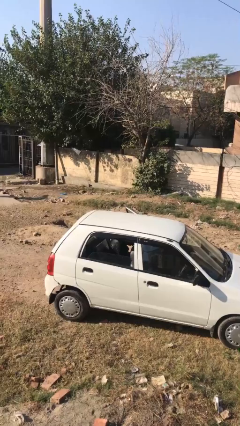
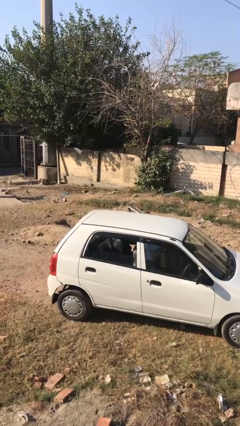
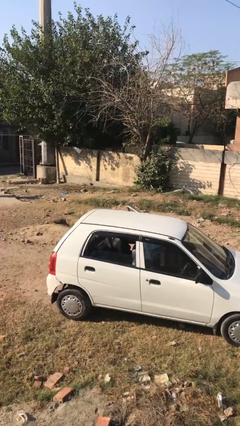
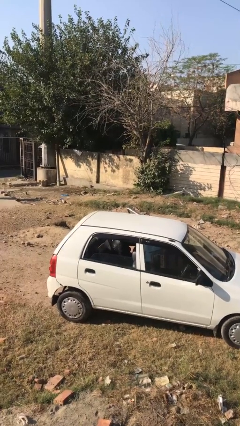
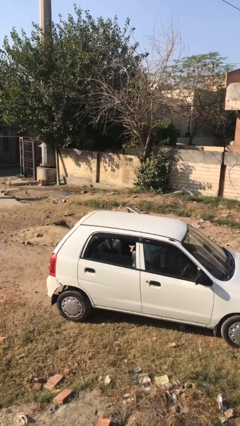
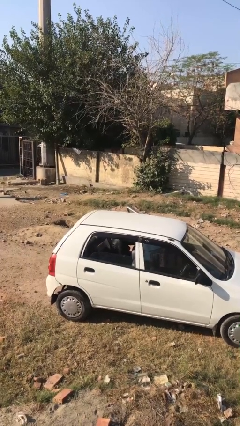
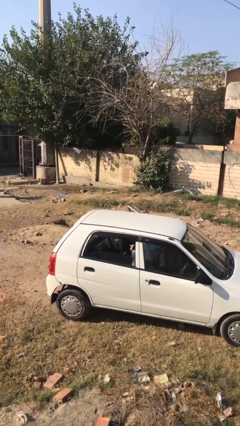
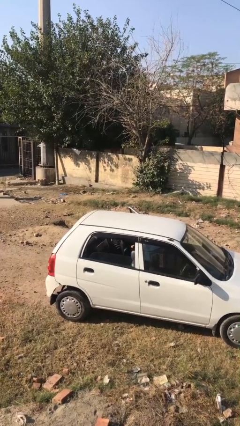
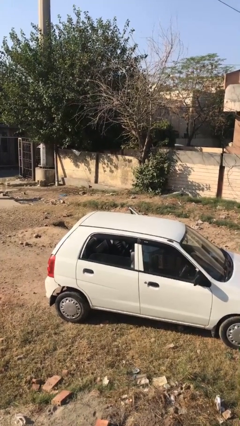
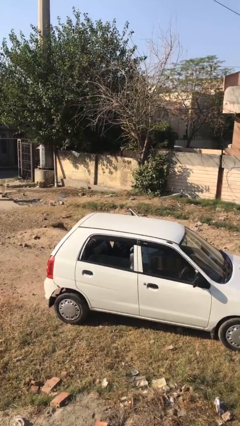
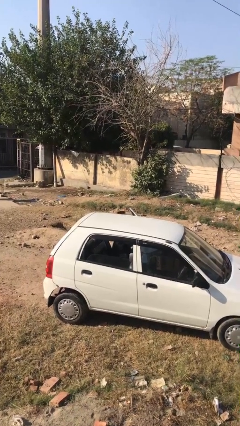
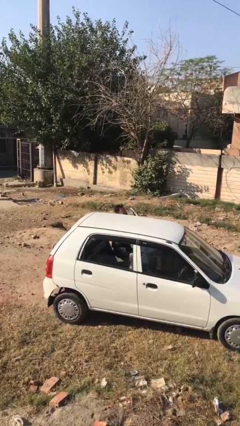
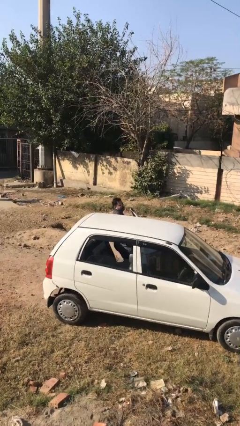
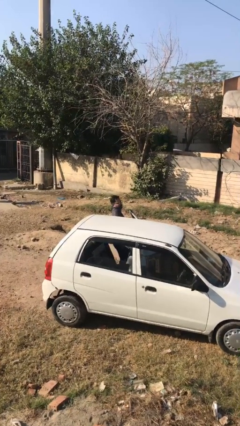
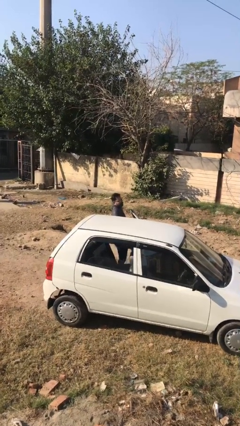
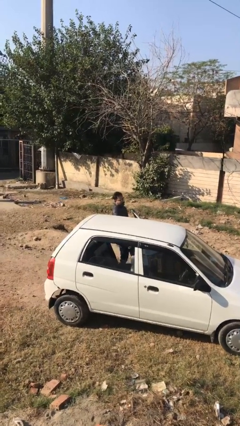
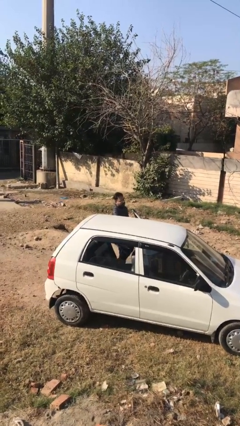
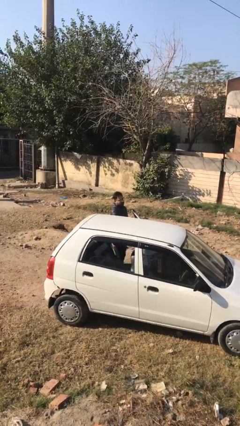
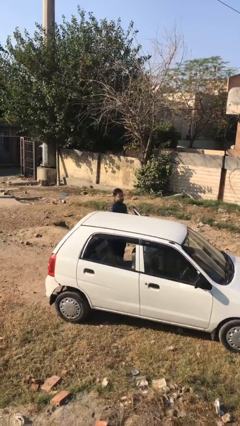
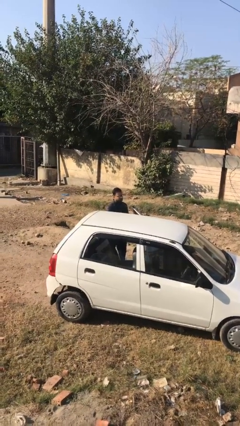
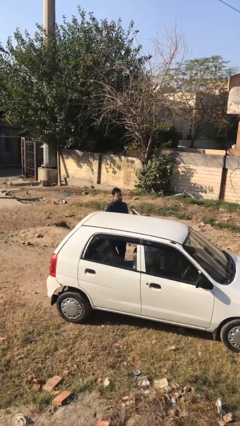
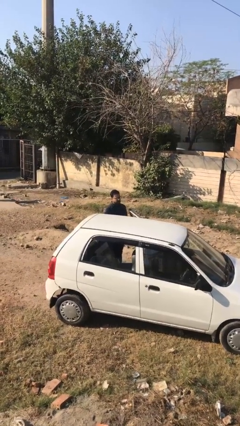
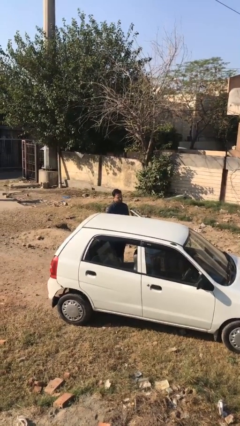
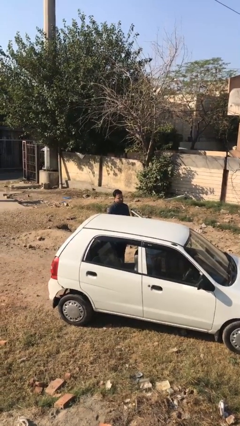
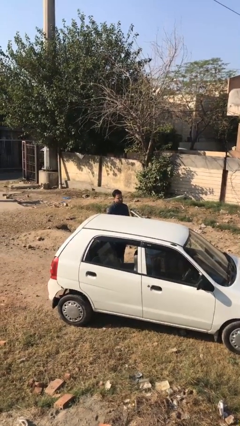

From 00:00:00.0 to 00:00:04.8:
person exits car

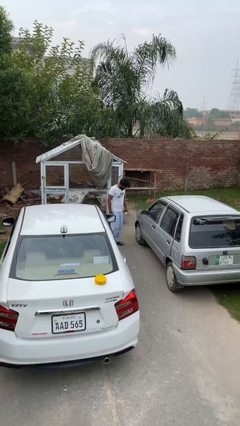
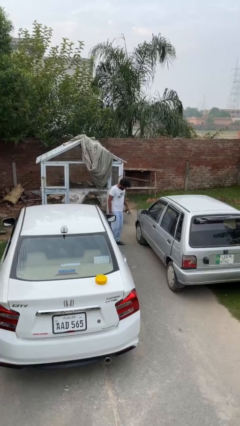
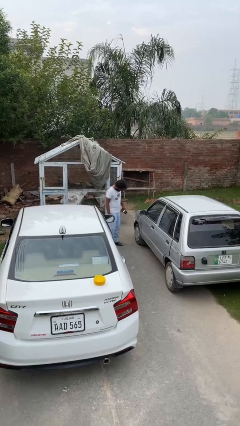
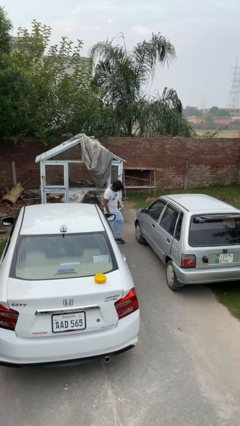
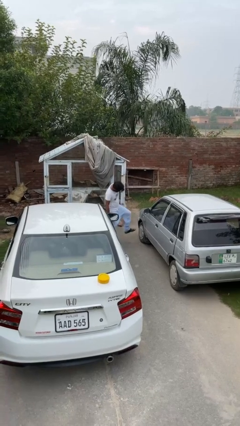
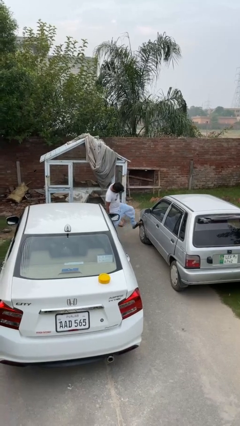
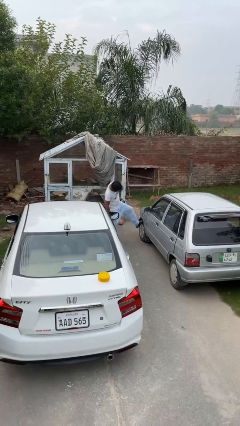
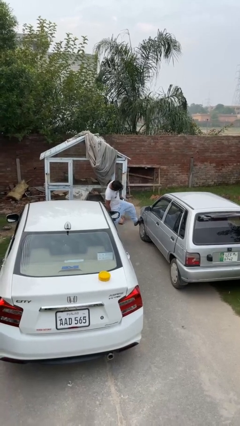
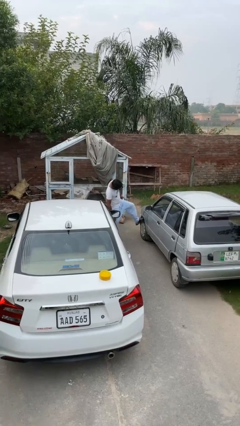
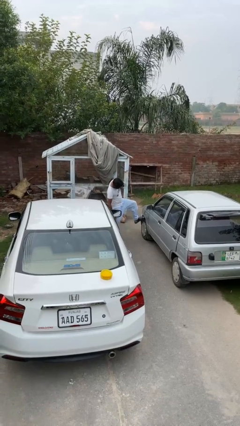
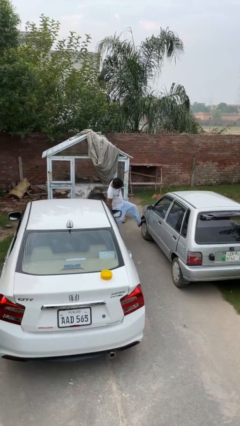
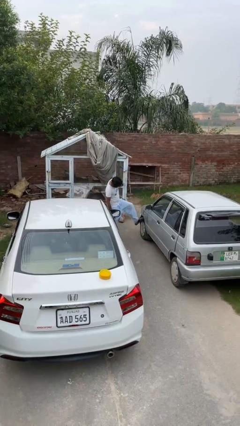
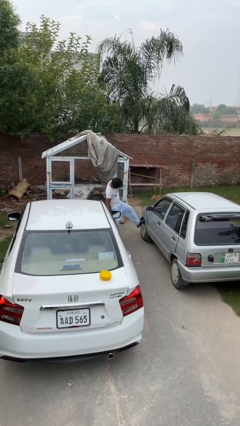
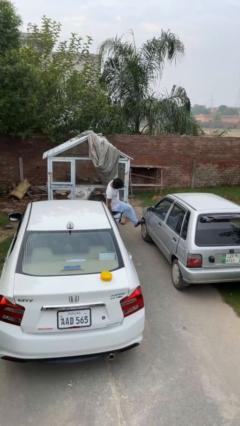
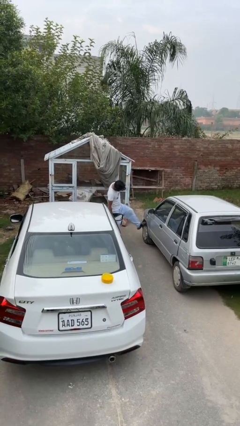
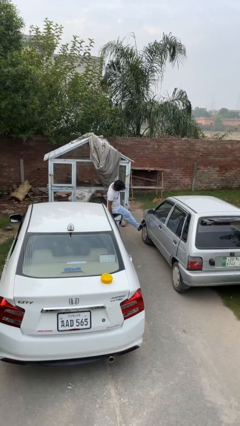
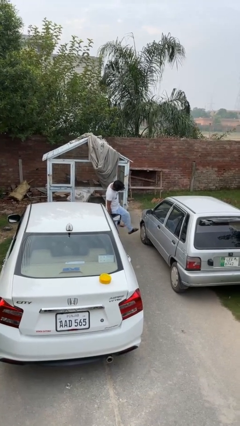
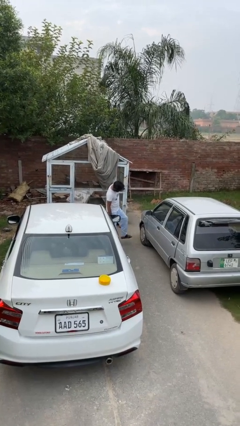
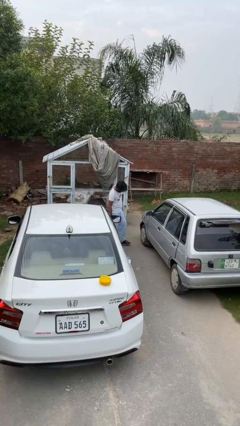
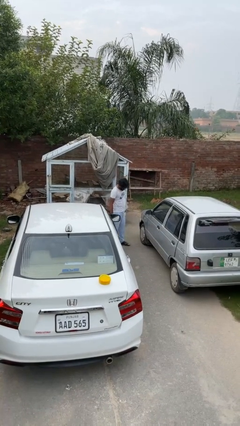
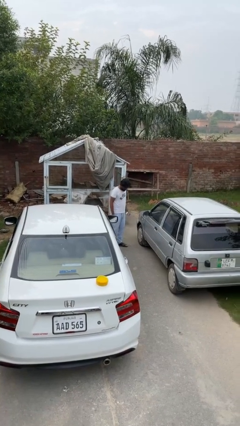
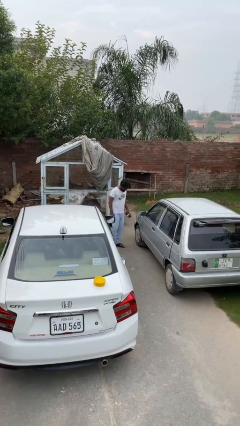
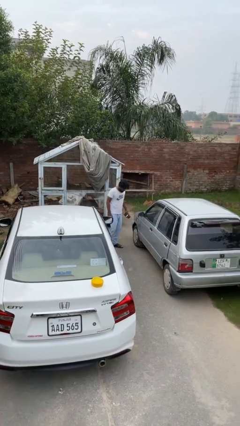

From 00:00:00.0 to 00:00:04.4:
person kicks car tires

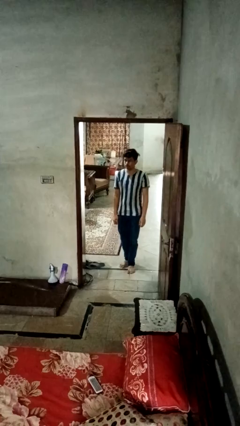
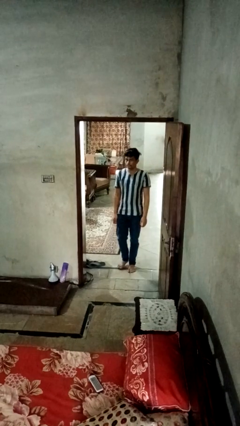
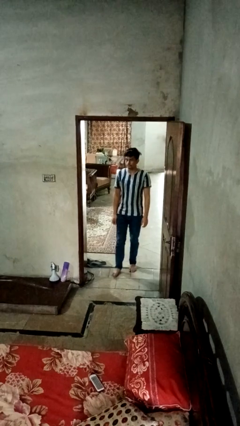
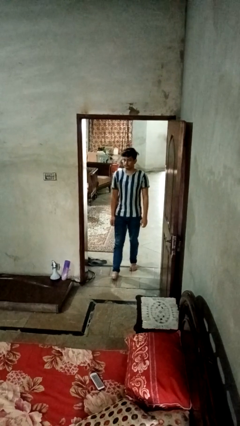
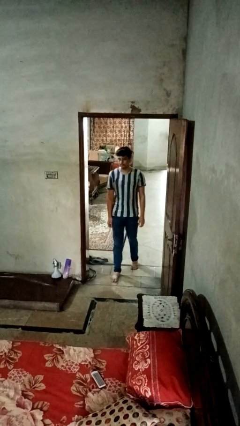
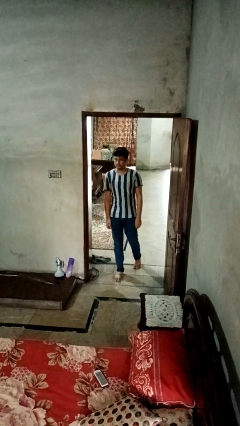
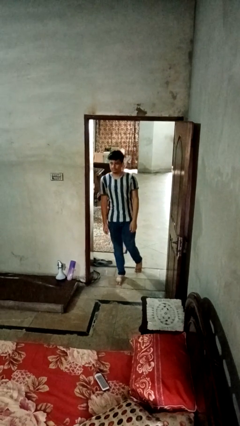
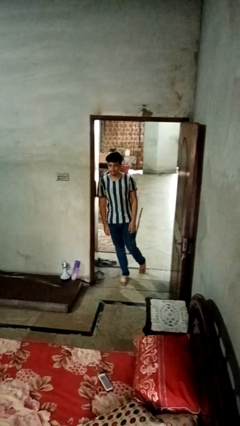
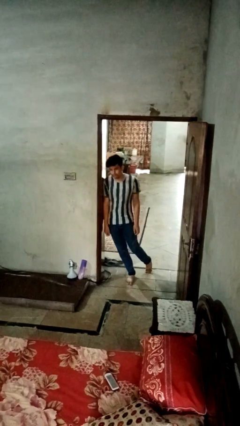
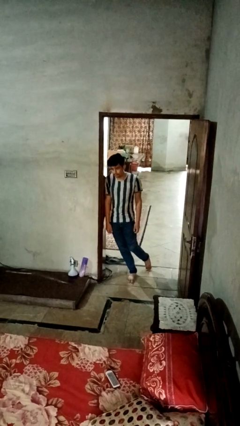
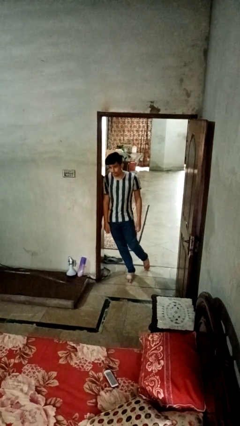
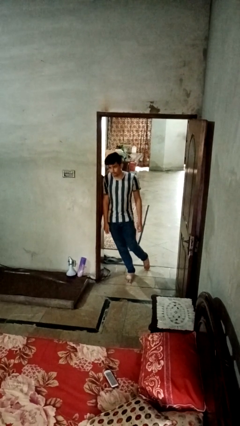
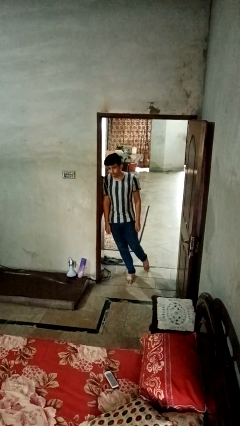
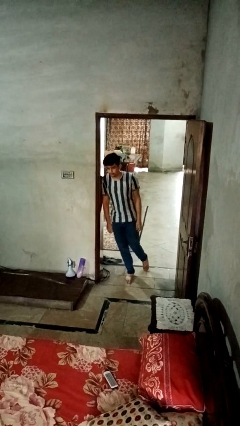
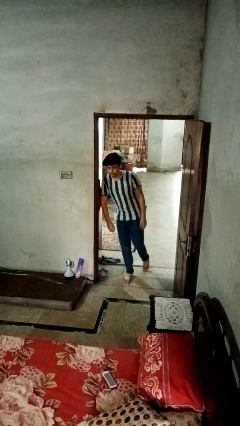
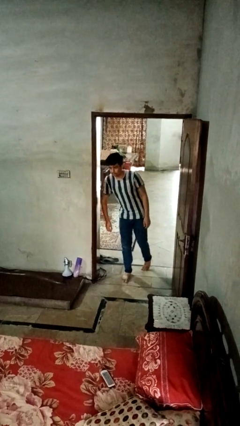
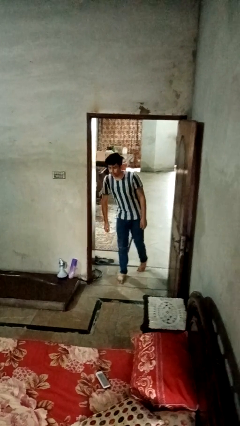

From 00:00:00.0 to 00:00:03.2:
person bumps into wall

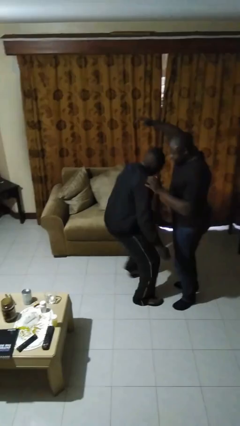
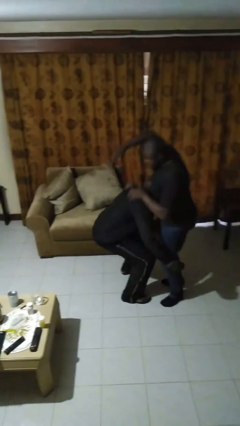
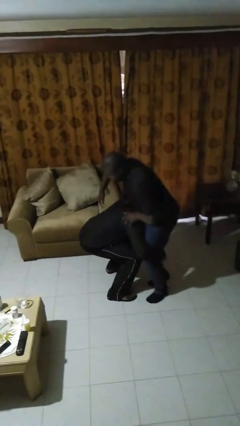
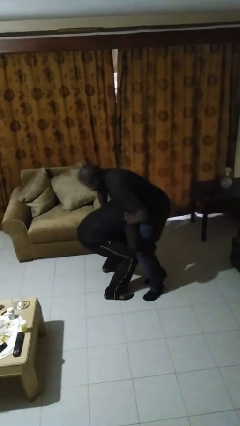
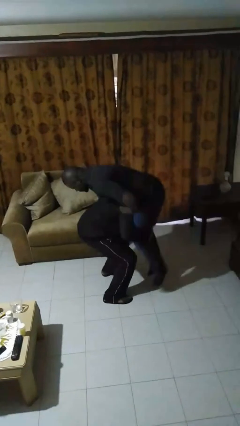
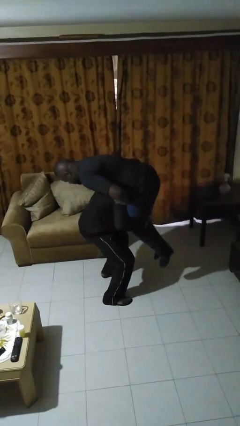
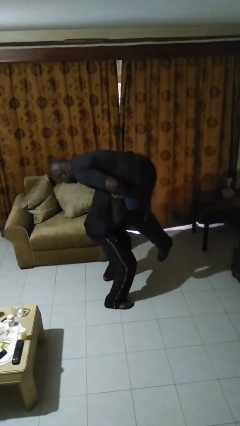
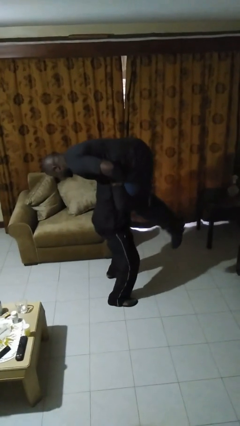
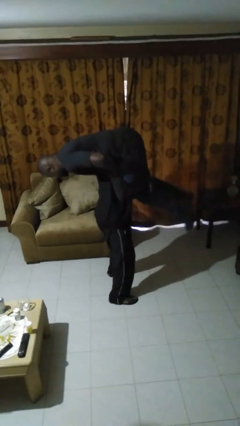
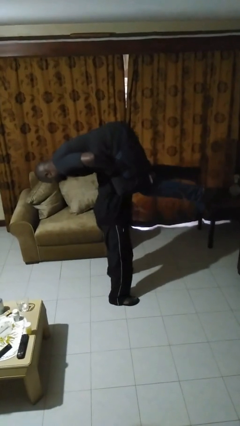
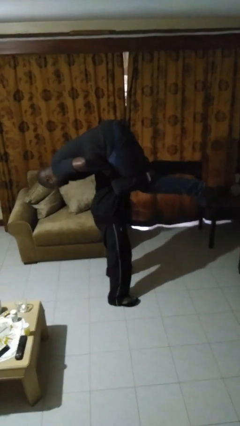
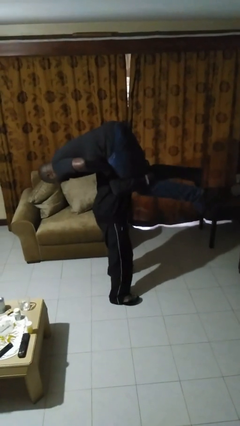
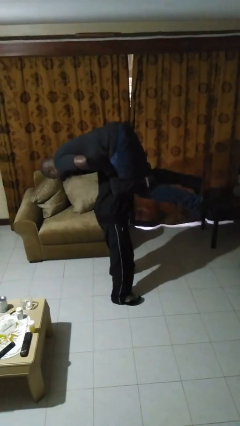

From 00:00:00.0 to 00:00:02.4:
person carries person over shoulder

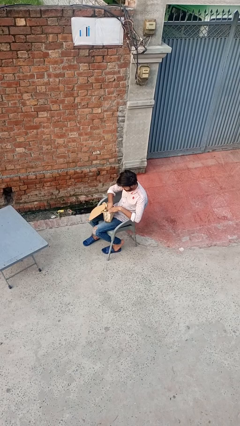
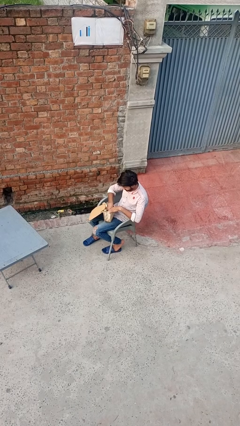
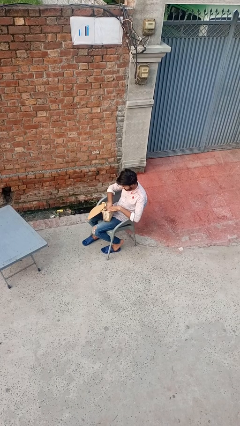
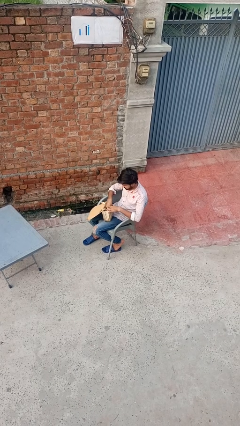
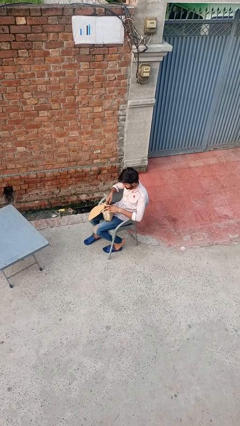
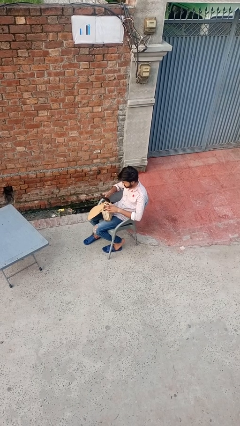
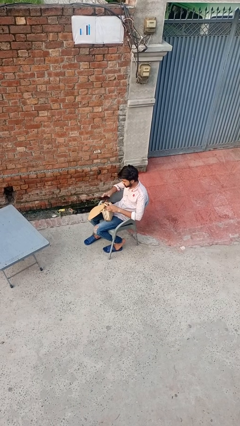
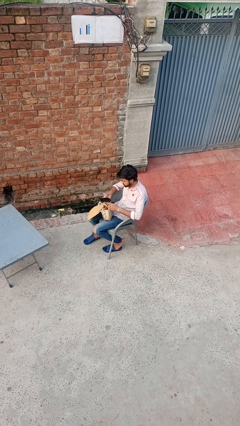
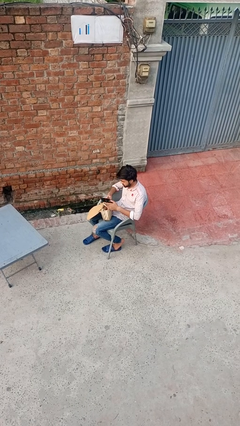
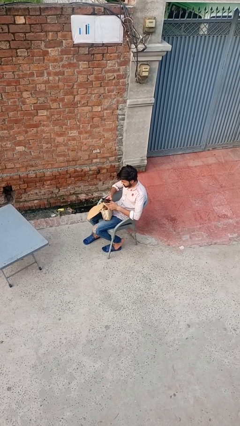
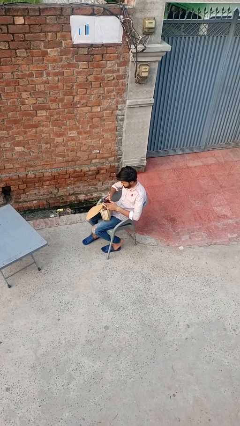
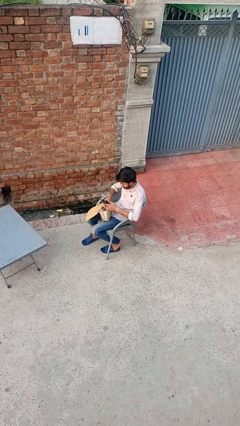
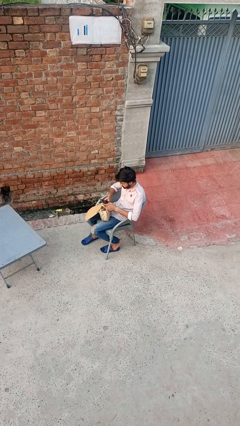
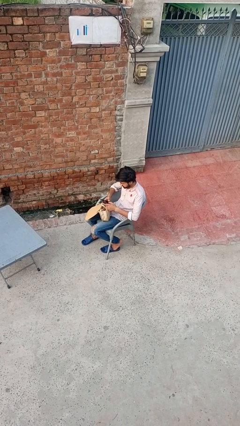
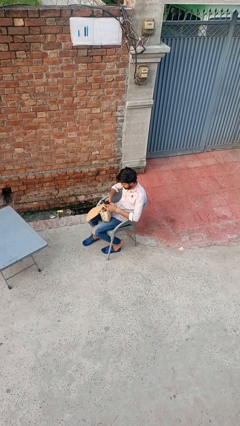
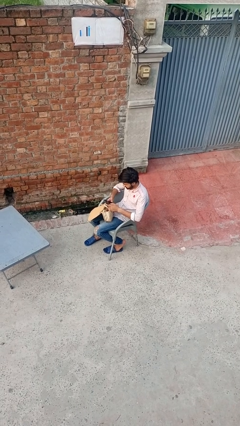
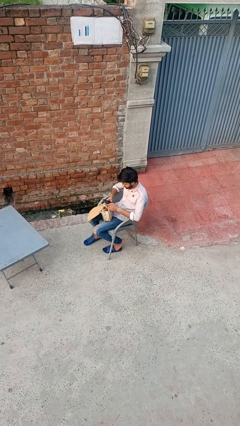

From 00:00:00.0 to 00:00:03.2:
person takes object from purse
